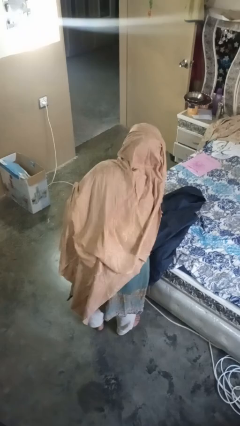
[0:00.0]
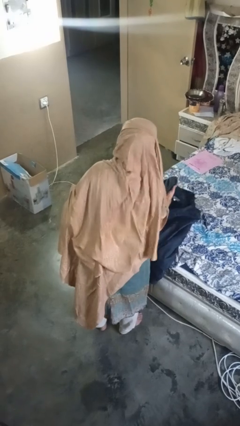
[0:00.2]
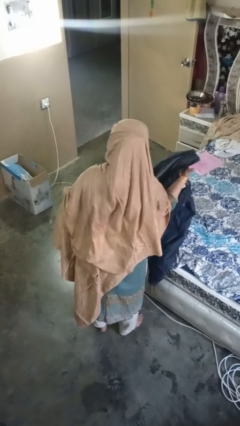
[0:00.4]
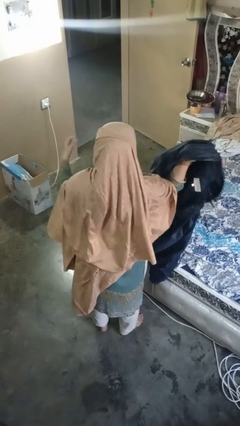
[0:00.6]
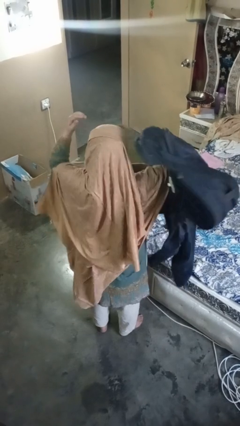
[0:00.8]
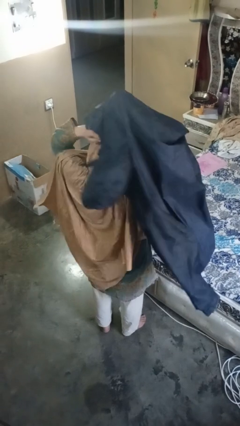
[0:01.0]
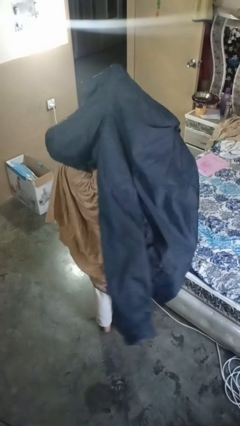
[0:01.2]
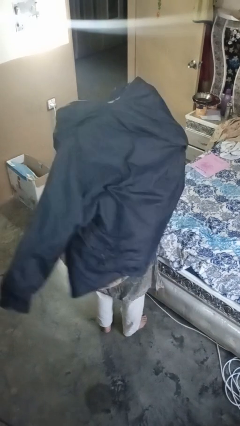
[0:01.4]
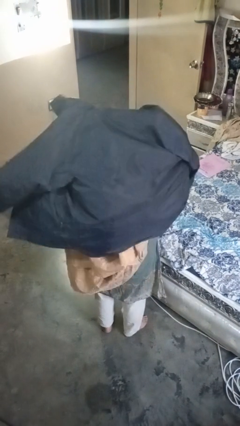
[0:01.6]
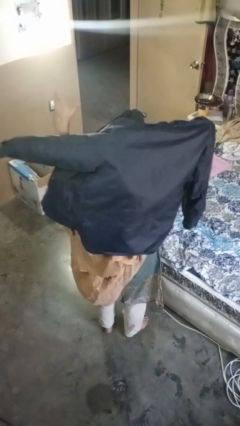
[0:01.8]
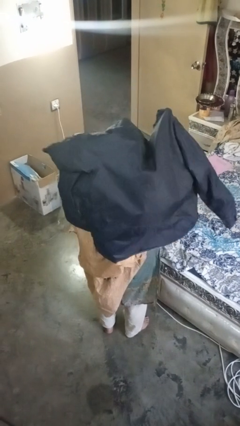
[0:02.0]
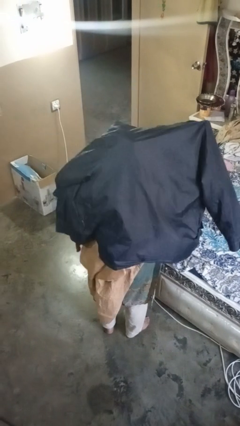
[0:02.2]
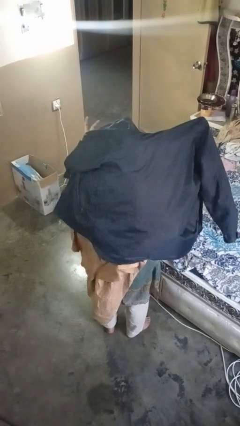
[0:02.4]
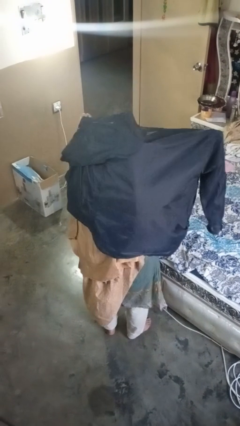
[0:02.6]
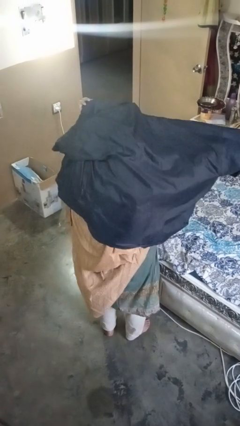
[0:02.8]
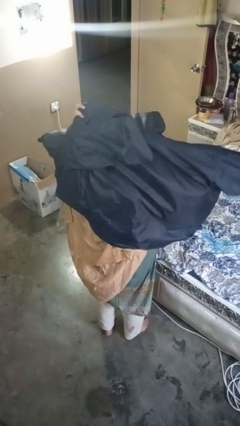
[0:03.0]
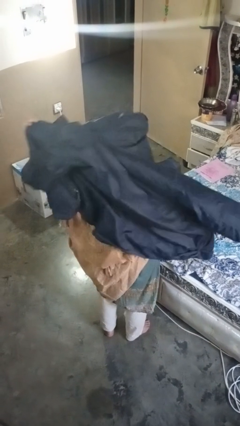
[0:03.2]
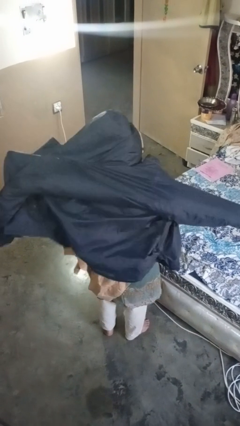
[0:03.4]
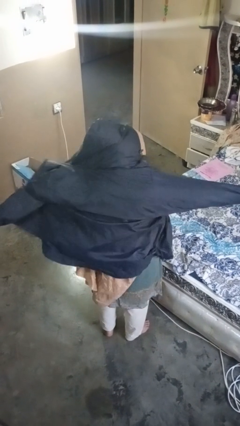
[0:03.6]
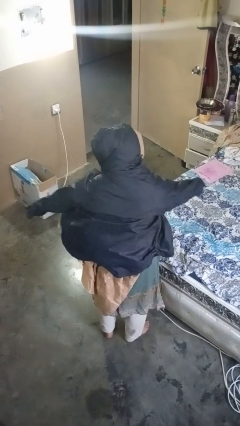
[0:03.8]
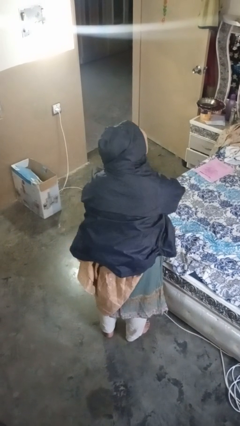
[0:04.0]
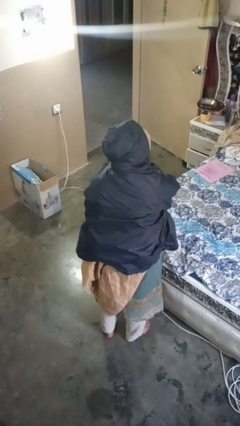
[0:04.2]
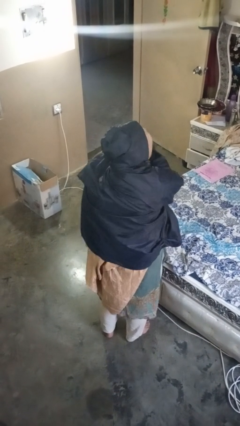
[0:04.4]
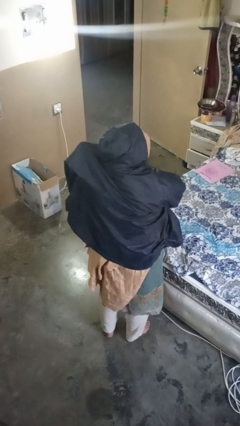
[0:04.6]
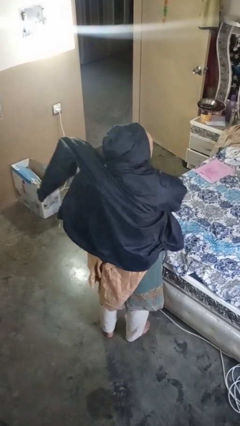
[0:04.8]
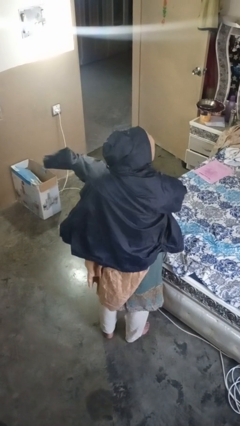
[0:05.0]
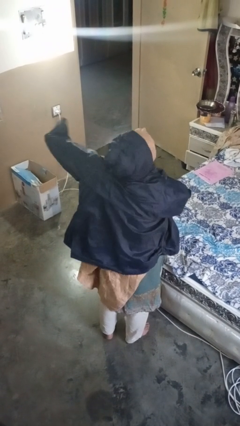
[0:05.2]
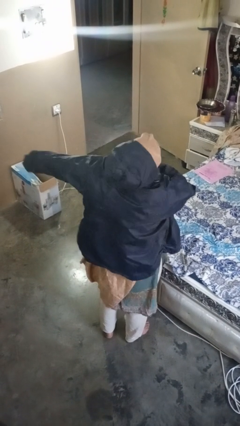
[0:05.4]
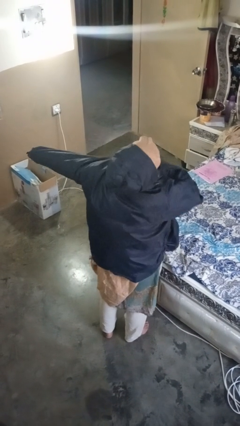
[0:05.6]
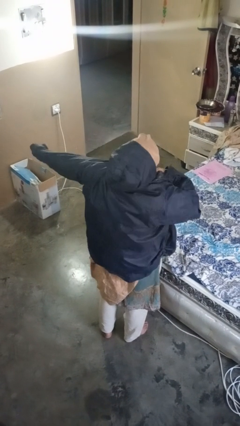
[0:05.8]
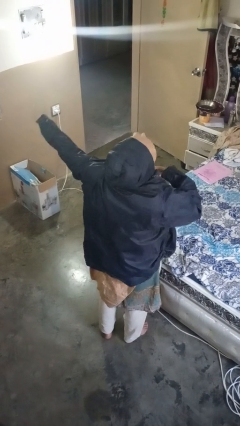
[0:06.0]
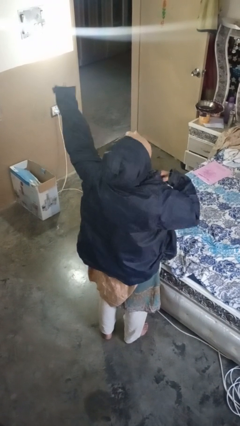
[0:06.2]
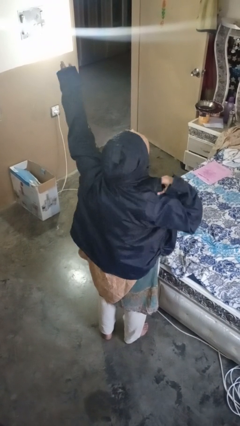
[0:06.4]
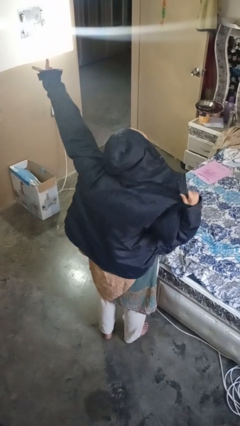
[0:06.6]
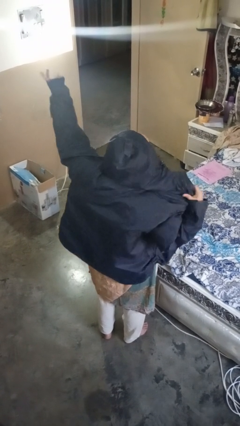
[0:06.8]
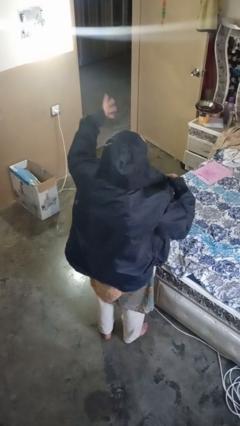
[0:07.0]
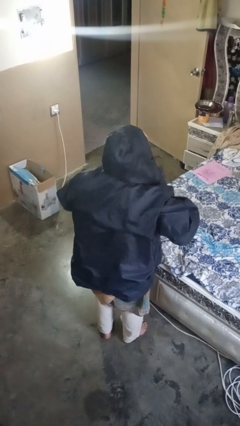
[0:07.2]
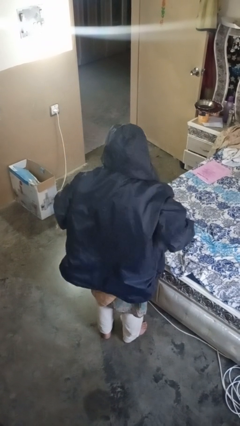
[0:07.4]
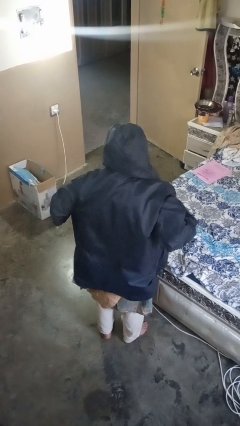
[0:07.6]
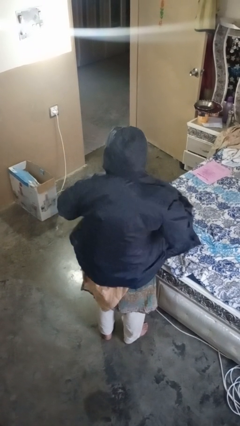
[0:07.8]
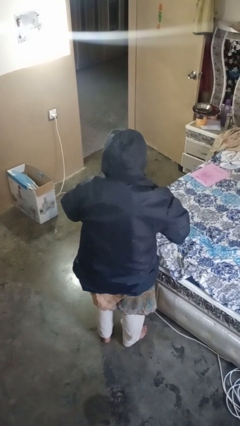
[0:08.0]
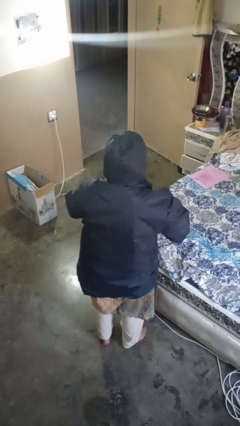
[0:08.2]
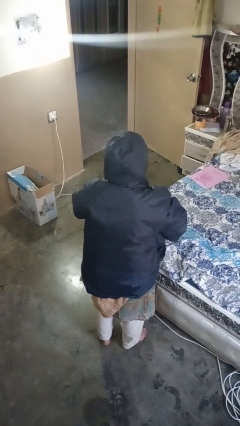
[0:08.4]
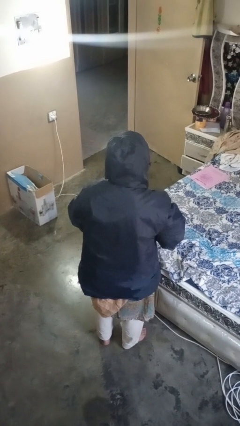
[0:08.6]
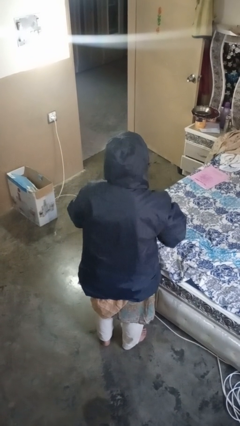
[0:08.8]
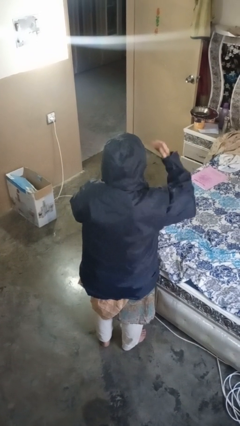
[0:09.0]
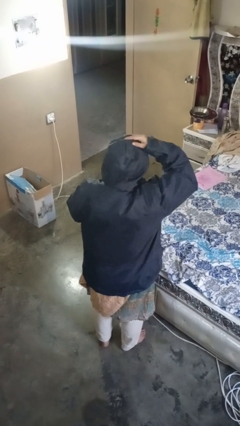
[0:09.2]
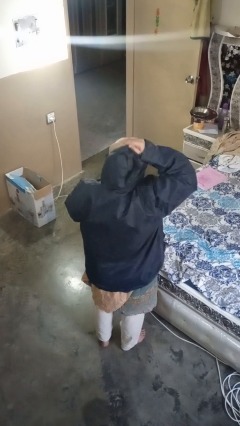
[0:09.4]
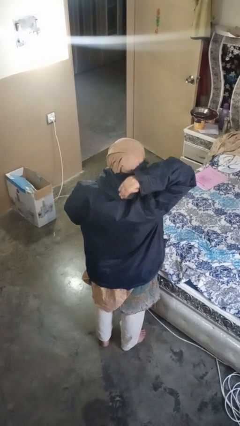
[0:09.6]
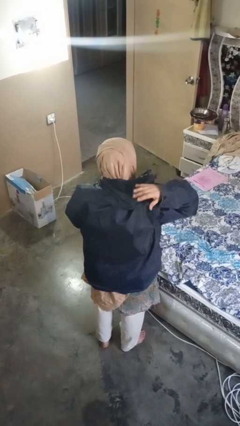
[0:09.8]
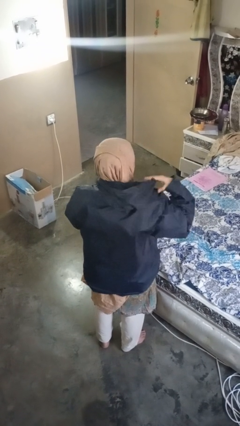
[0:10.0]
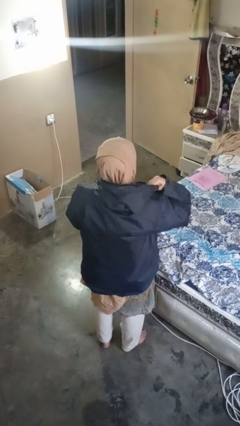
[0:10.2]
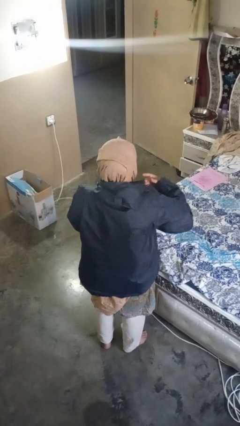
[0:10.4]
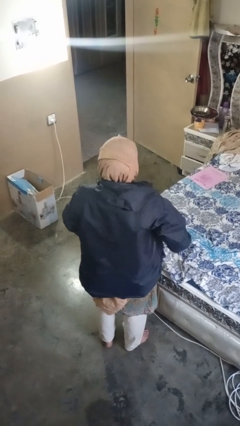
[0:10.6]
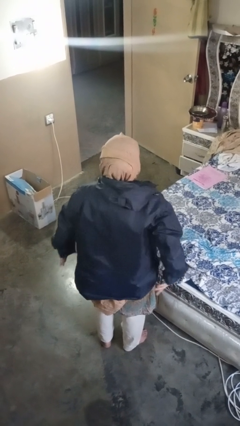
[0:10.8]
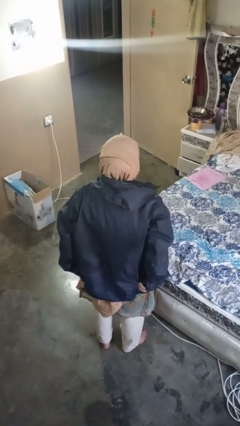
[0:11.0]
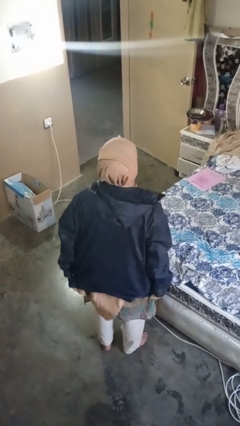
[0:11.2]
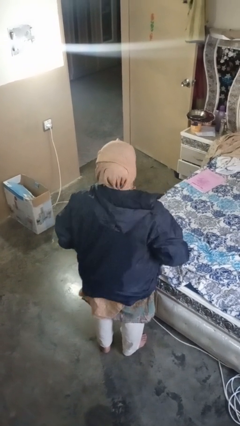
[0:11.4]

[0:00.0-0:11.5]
person puts on jacket

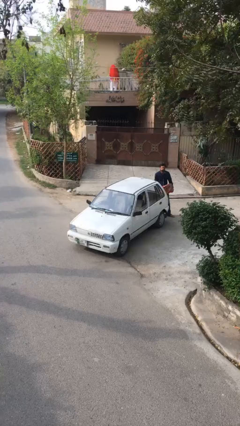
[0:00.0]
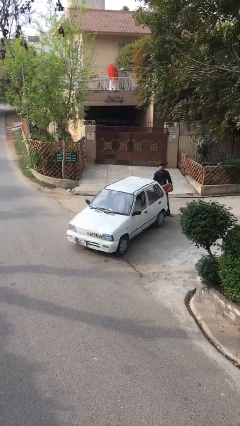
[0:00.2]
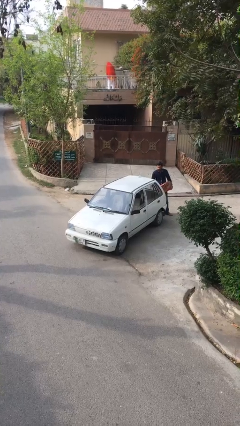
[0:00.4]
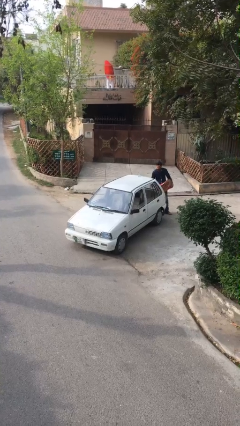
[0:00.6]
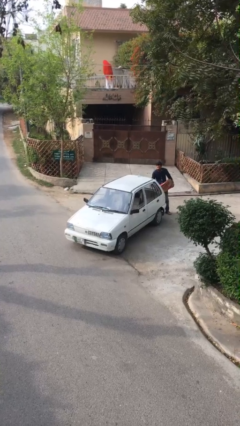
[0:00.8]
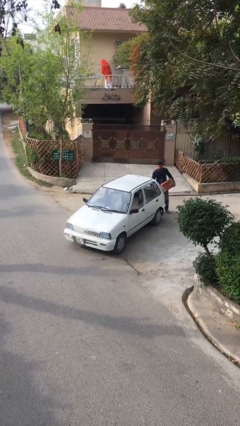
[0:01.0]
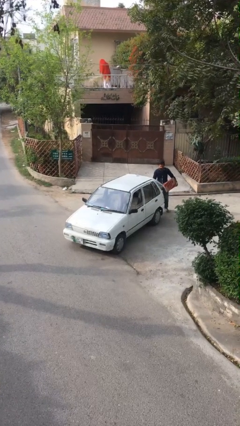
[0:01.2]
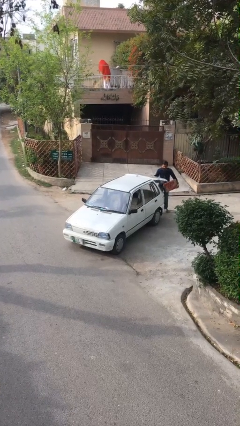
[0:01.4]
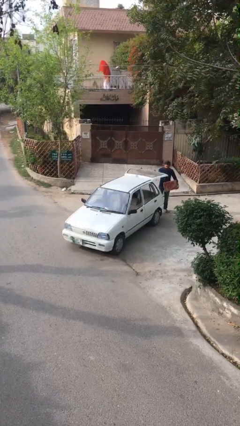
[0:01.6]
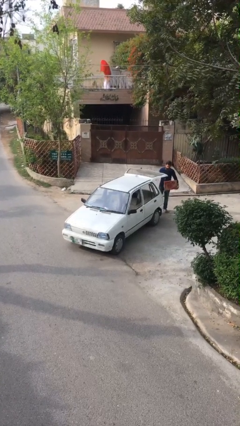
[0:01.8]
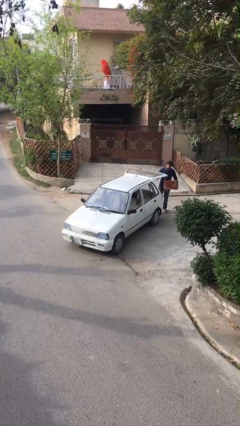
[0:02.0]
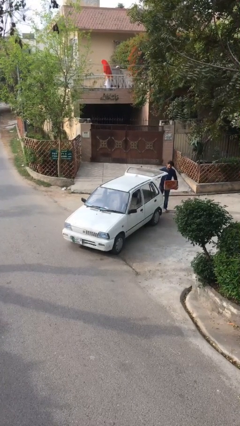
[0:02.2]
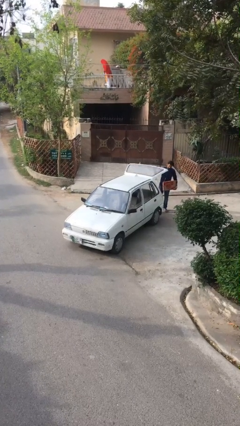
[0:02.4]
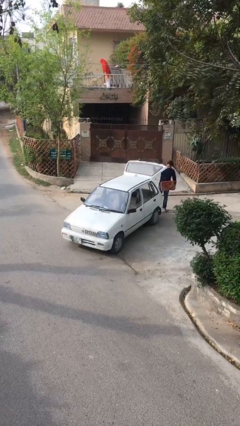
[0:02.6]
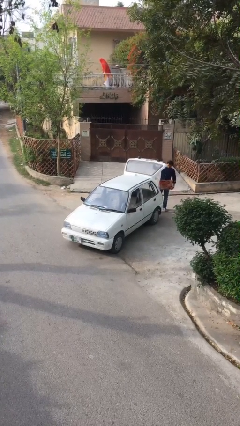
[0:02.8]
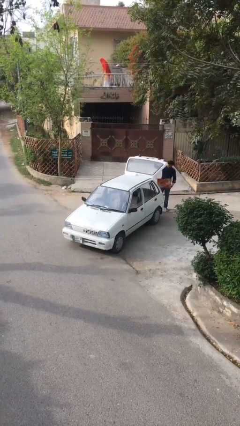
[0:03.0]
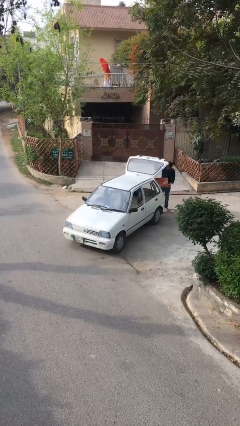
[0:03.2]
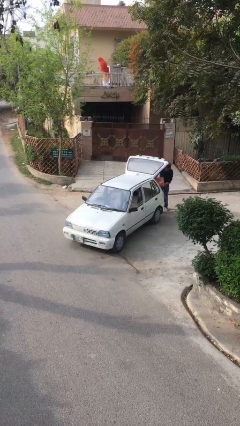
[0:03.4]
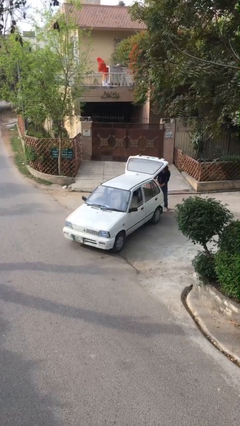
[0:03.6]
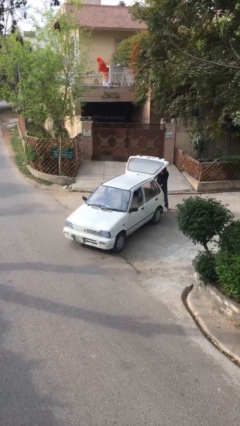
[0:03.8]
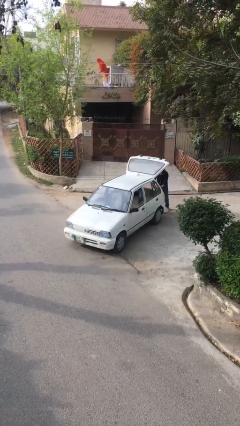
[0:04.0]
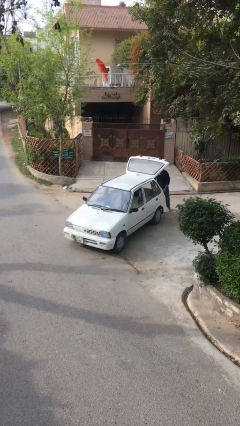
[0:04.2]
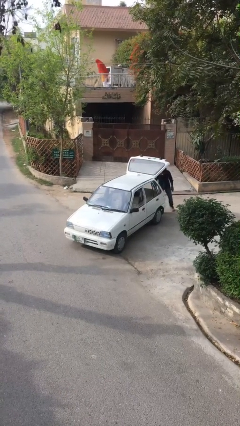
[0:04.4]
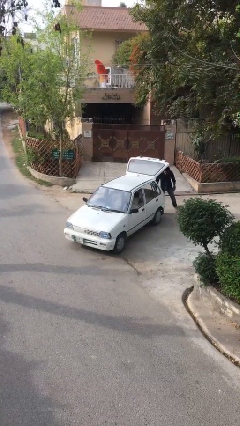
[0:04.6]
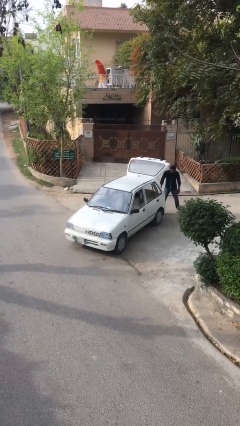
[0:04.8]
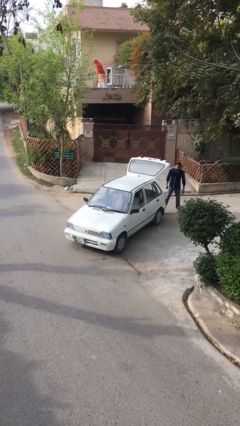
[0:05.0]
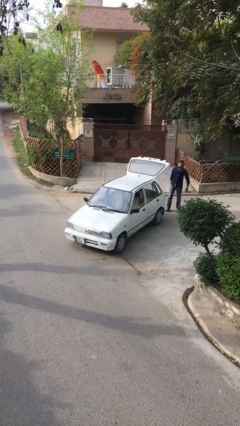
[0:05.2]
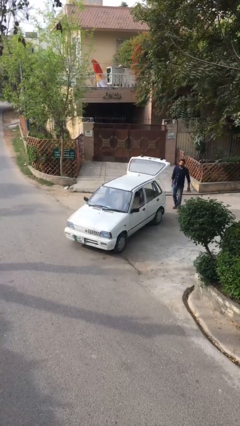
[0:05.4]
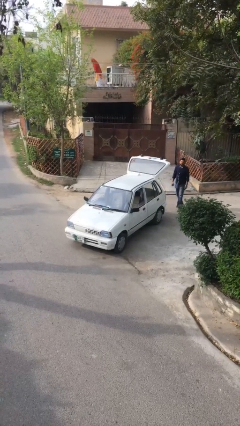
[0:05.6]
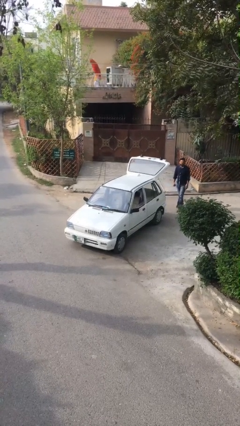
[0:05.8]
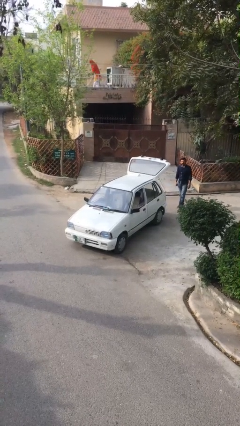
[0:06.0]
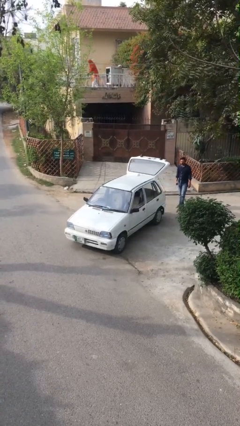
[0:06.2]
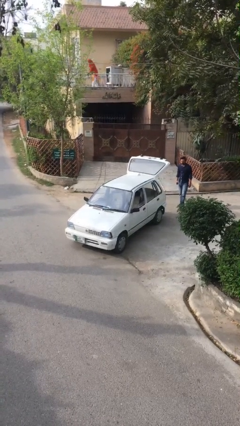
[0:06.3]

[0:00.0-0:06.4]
person loads car

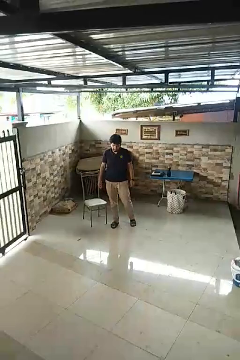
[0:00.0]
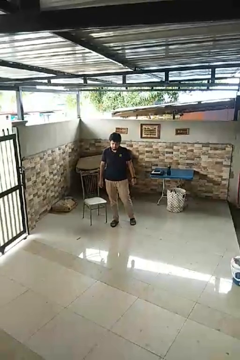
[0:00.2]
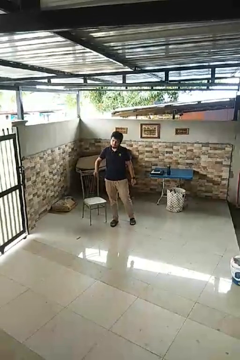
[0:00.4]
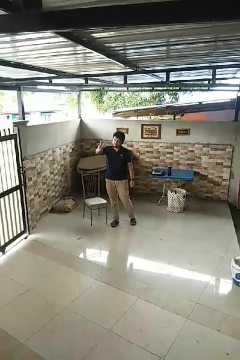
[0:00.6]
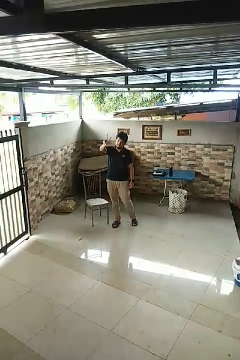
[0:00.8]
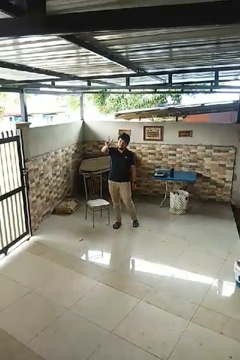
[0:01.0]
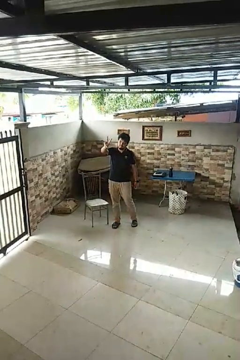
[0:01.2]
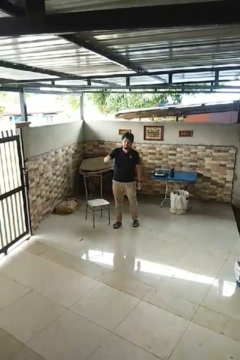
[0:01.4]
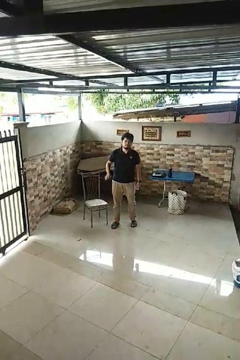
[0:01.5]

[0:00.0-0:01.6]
person gestures peace
